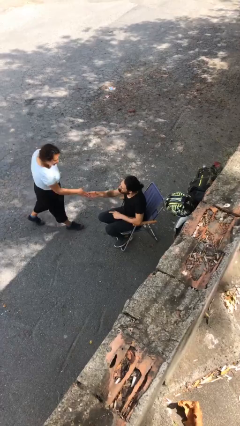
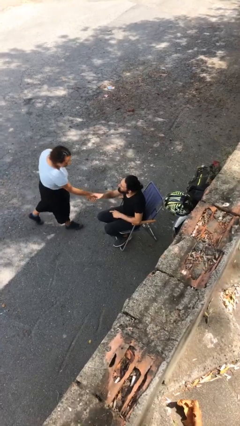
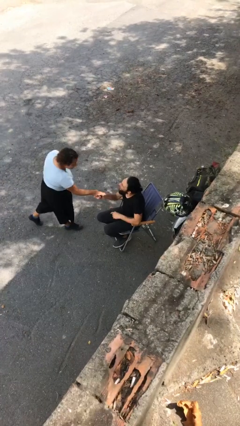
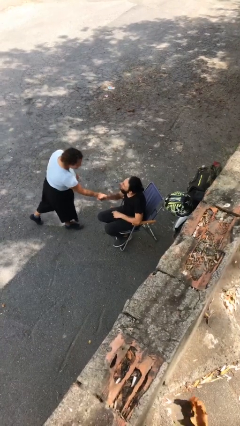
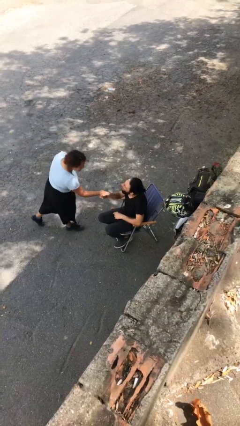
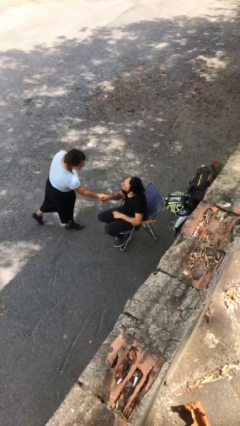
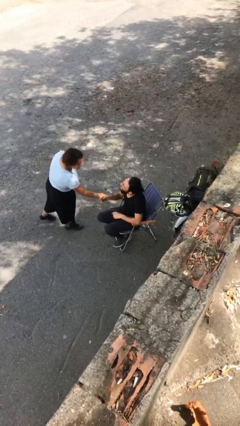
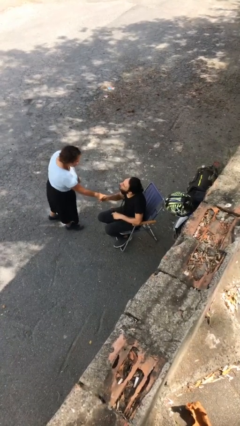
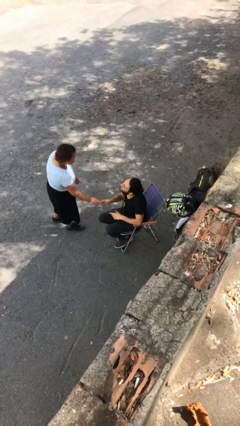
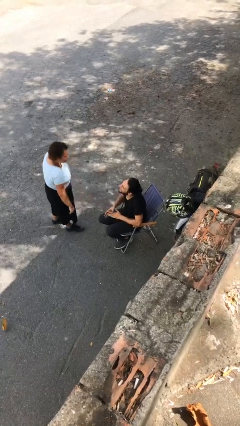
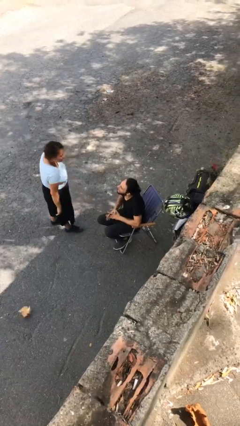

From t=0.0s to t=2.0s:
person shakes hand

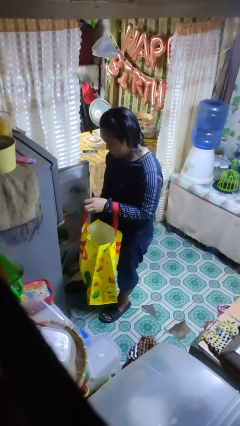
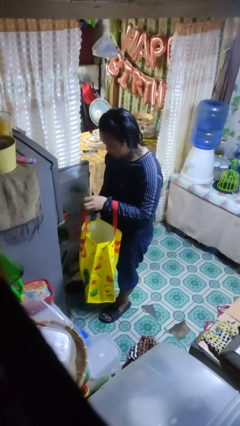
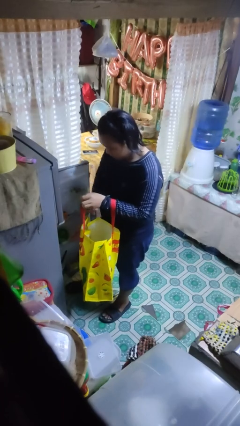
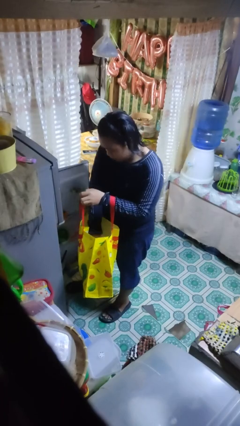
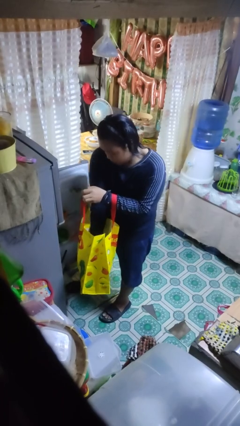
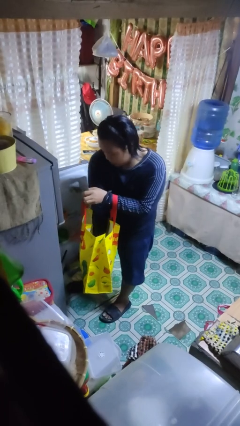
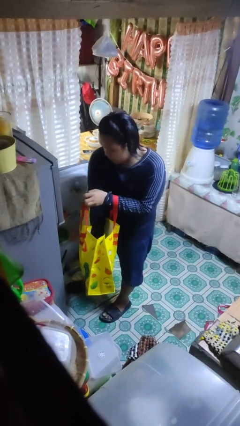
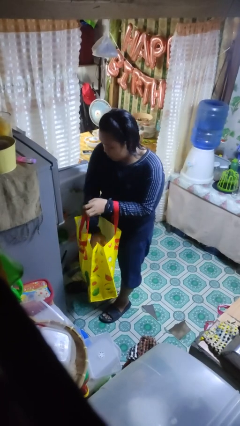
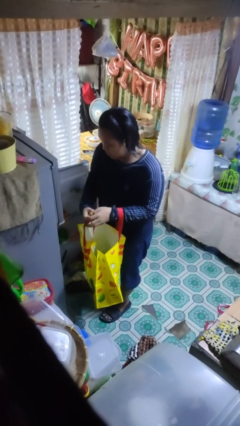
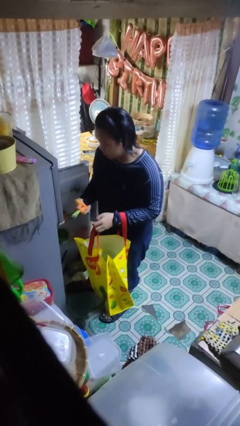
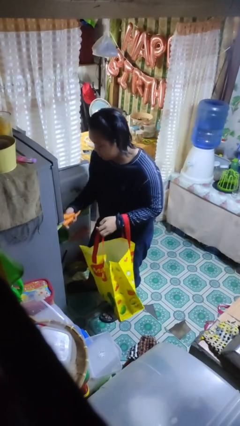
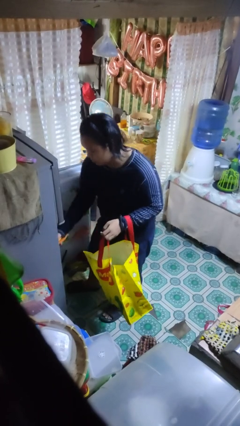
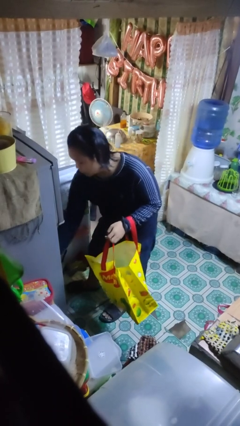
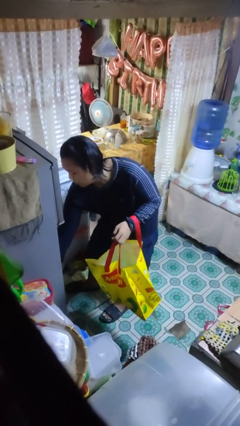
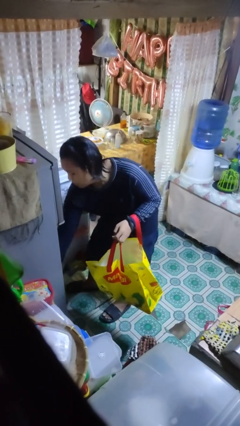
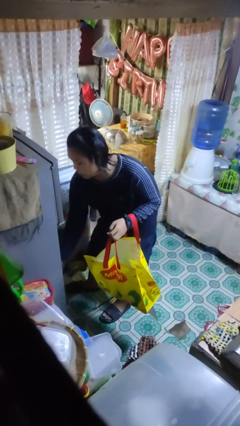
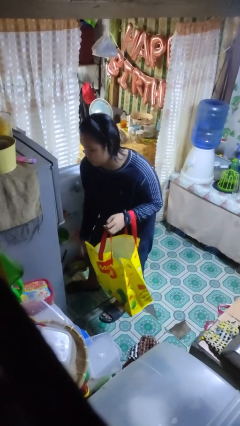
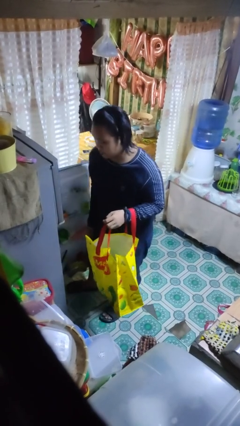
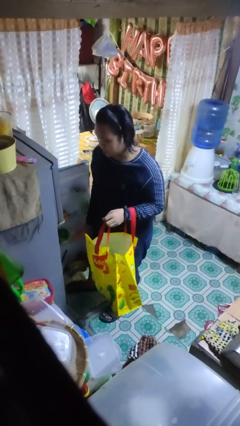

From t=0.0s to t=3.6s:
person loads groceries into refrigerator

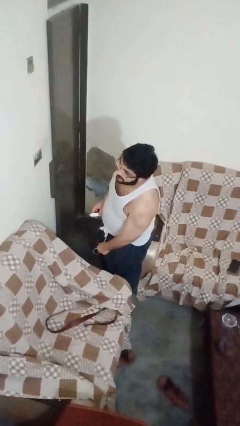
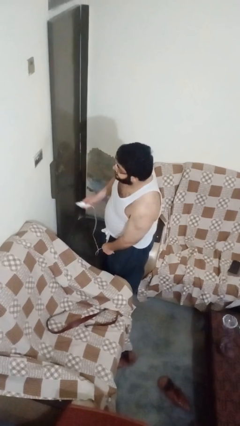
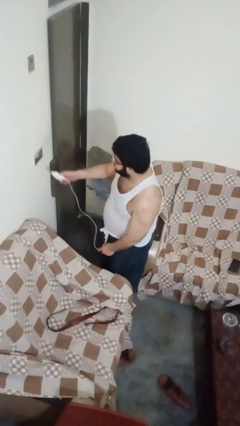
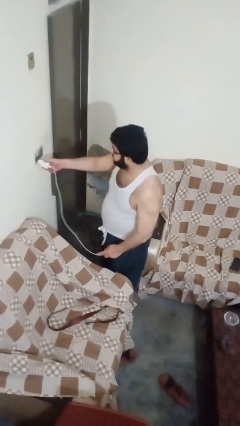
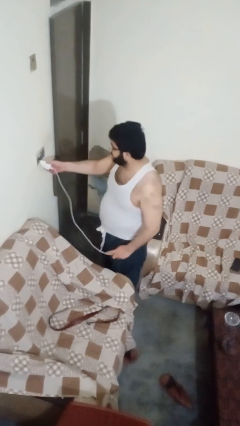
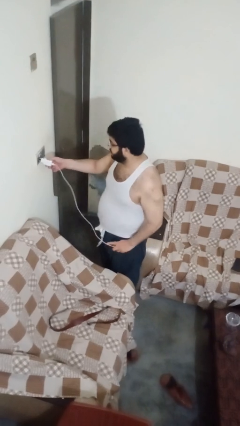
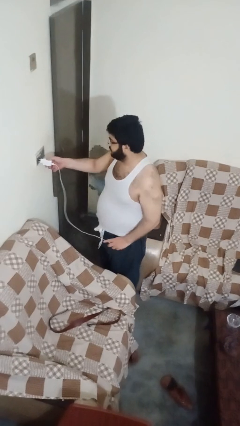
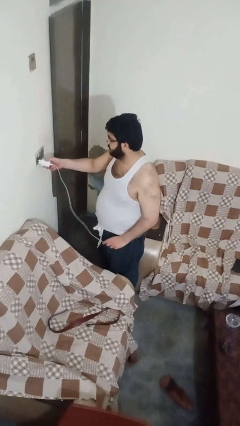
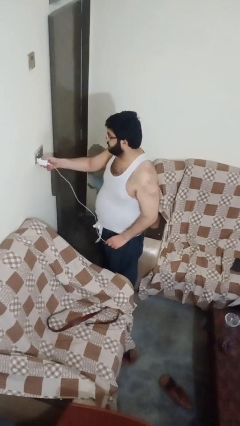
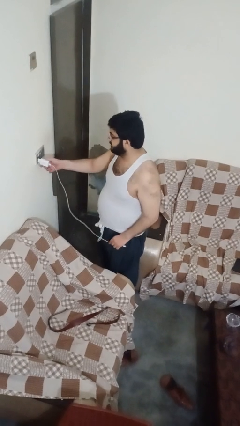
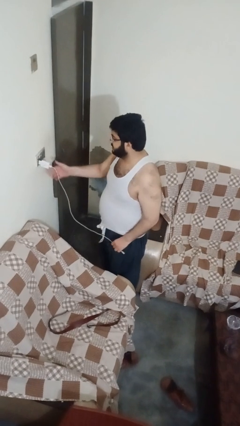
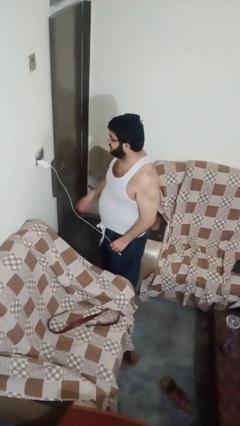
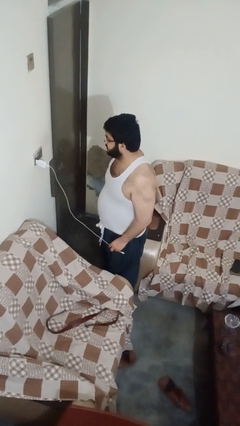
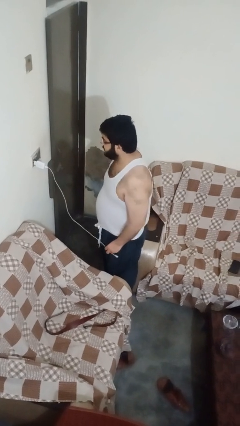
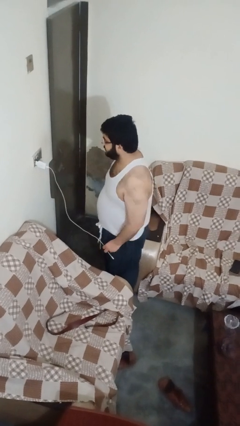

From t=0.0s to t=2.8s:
person plugs into electrical socket

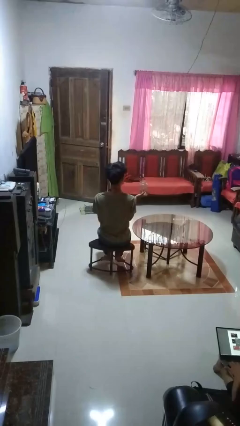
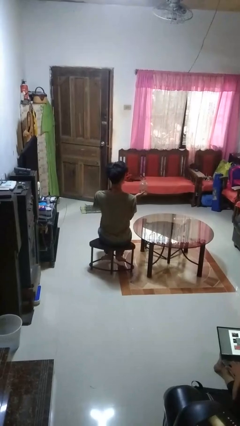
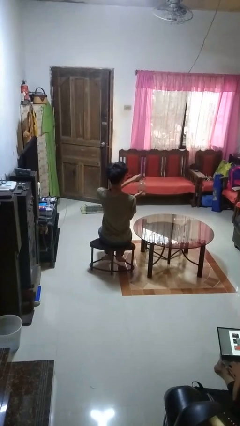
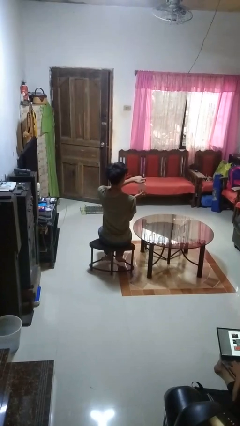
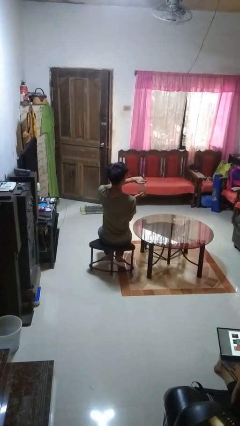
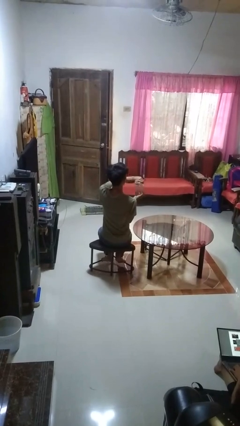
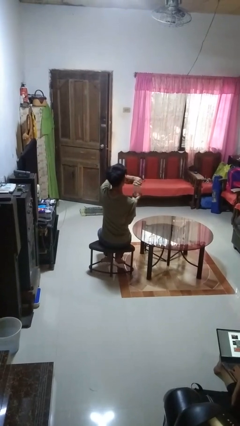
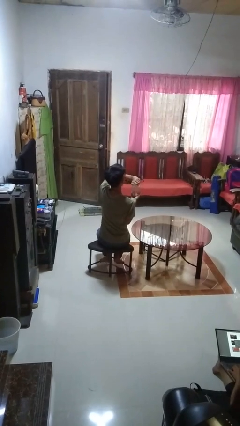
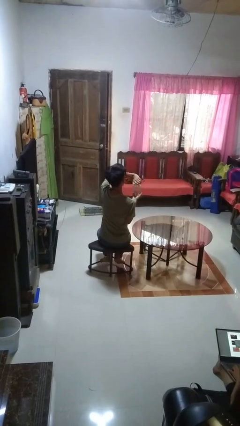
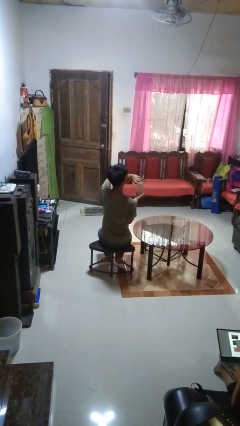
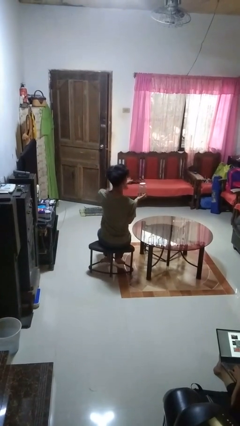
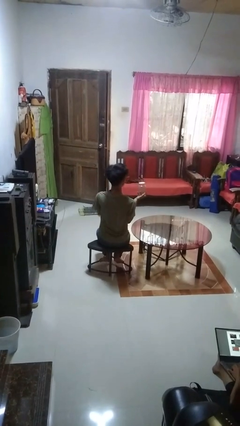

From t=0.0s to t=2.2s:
person closes jar

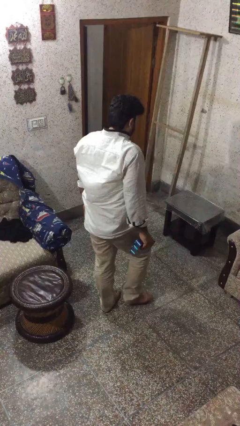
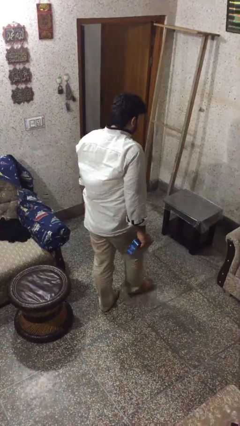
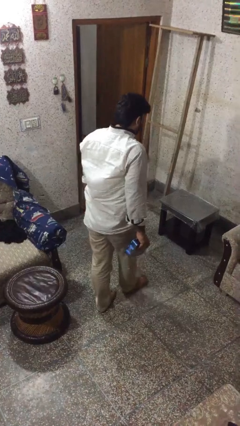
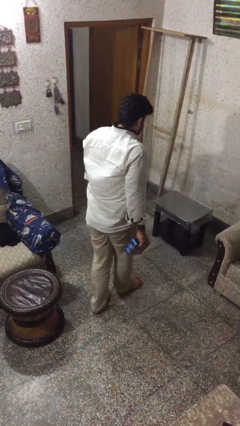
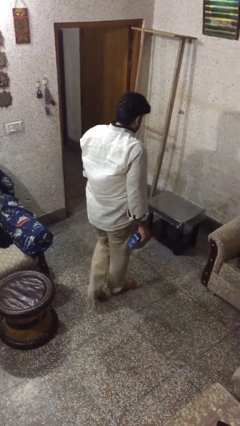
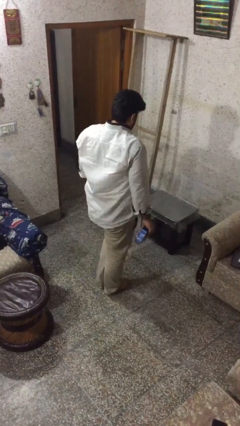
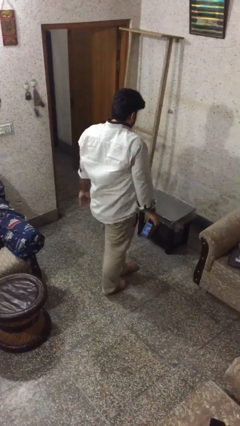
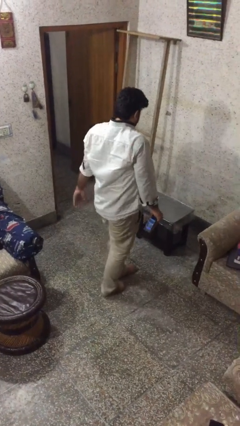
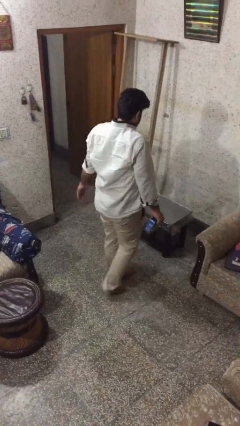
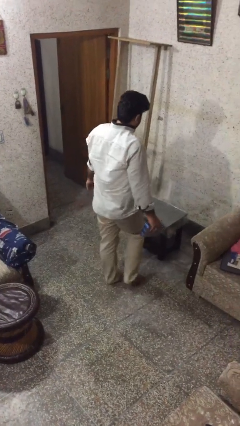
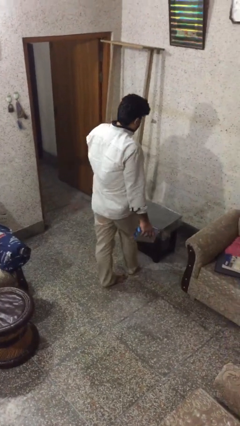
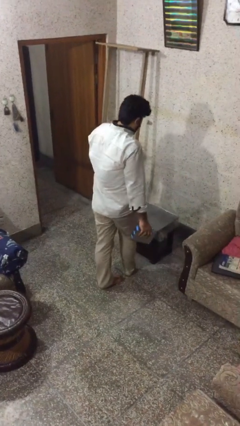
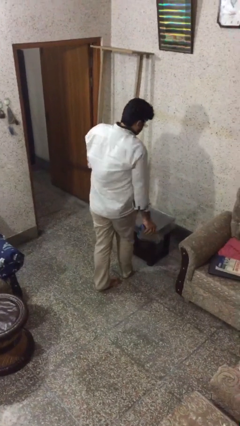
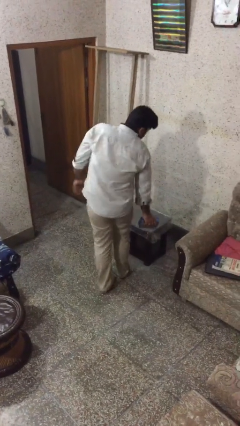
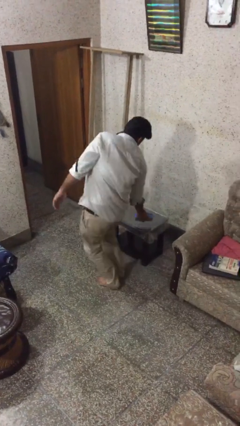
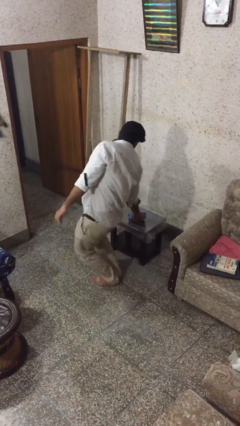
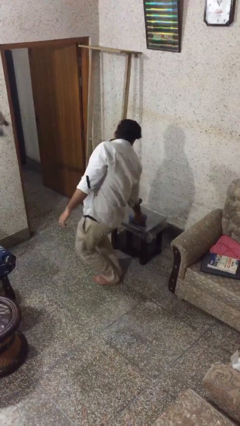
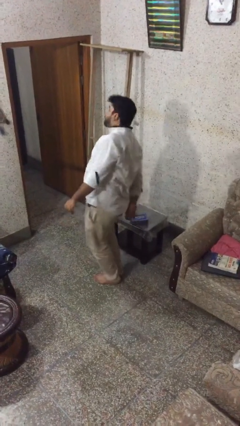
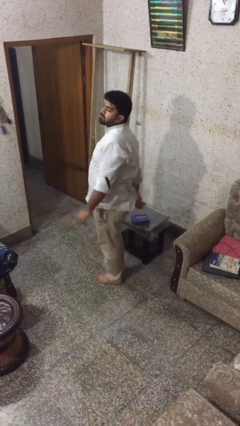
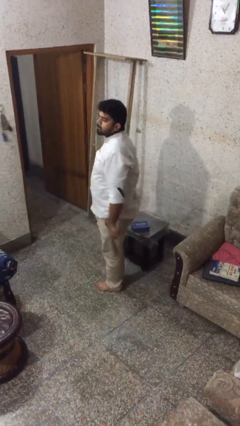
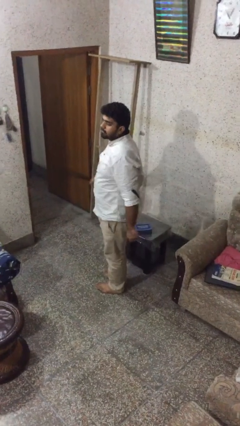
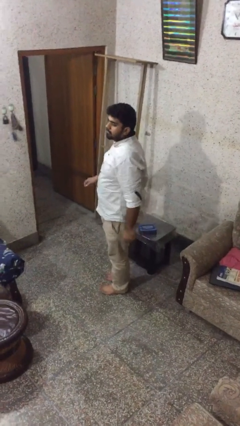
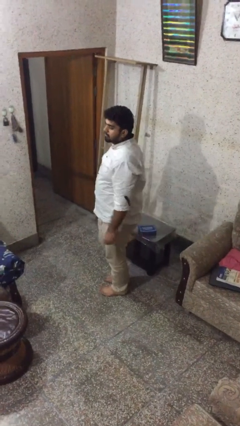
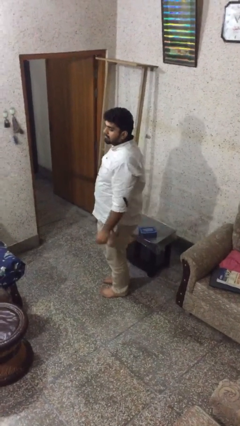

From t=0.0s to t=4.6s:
person puts down object on table

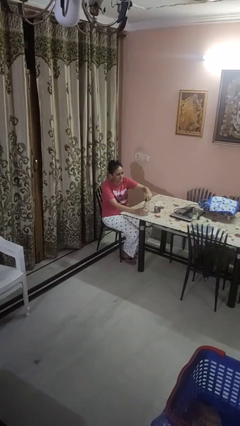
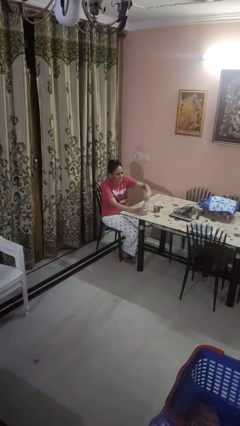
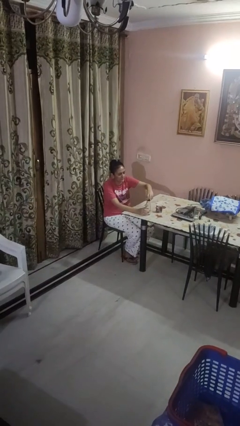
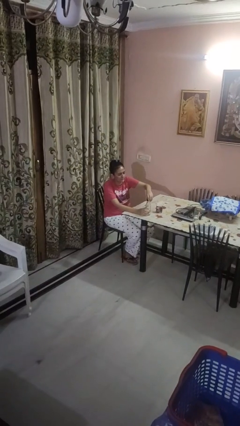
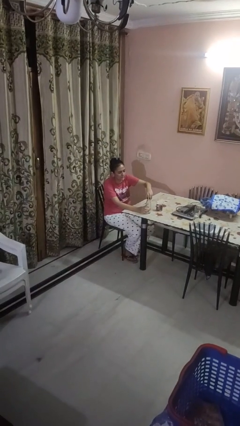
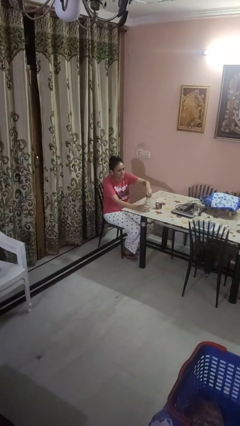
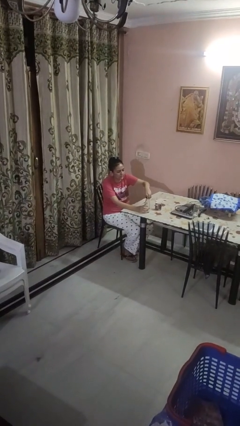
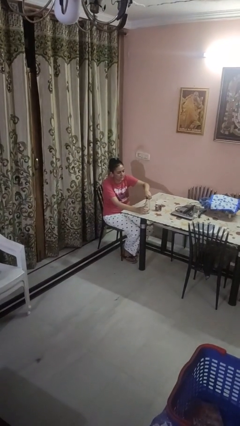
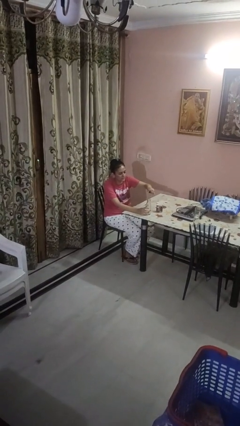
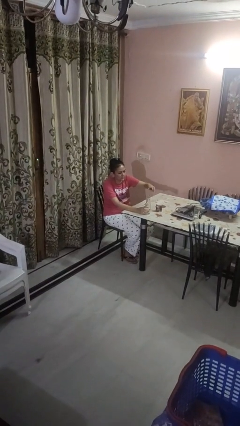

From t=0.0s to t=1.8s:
person unscrews lid from bottle

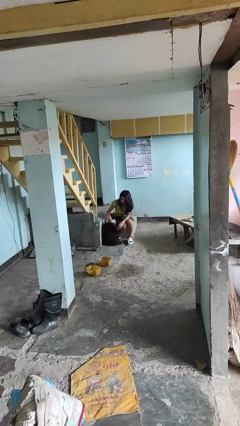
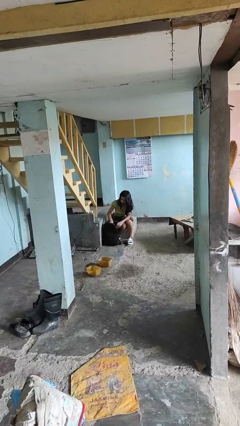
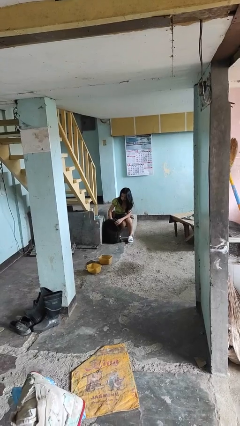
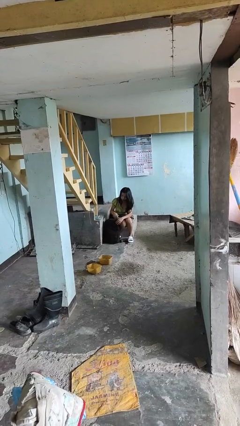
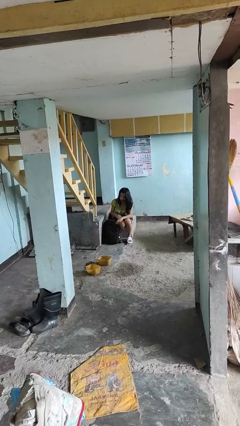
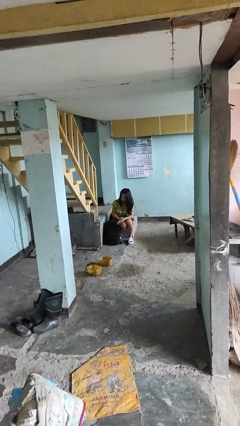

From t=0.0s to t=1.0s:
person puts object into backpack
